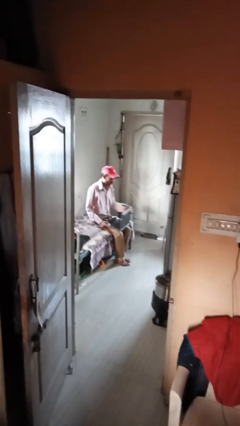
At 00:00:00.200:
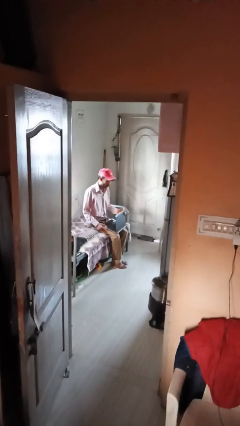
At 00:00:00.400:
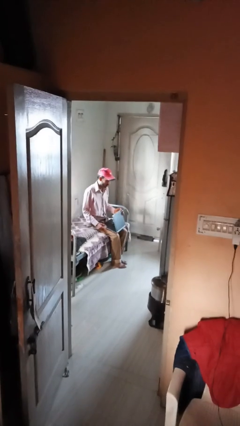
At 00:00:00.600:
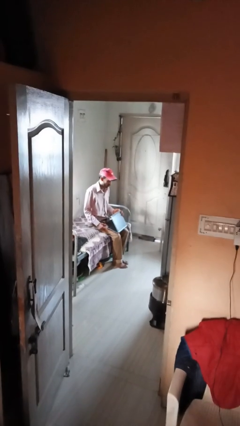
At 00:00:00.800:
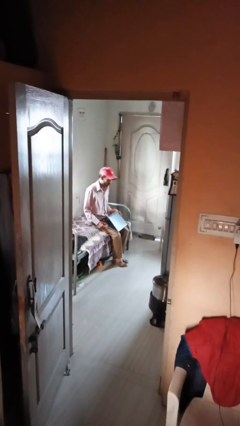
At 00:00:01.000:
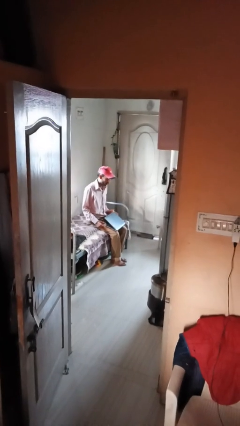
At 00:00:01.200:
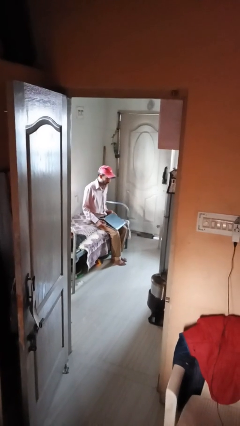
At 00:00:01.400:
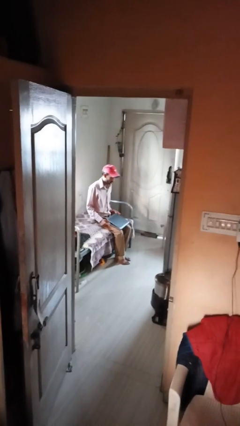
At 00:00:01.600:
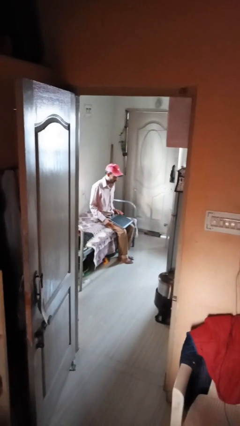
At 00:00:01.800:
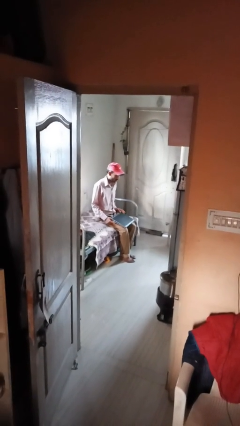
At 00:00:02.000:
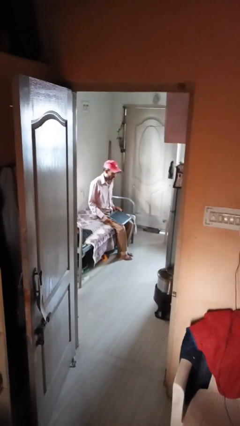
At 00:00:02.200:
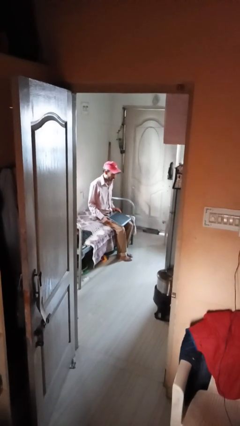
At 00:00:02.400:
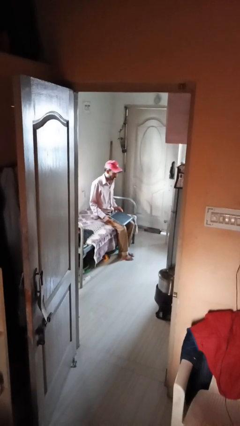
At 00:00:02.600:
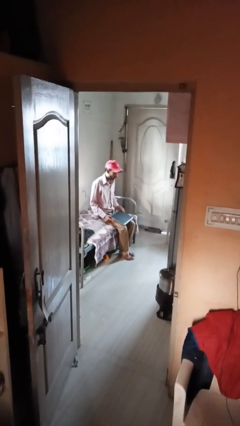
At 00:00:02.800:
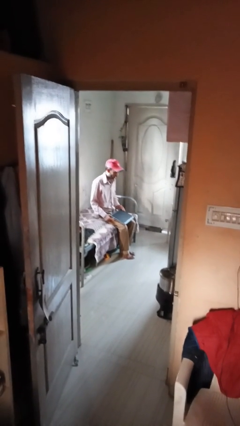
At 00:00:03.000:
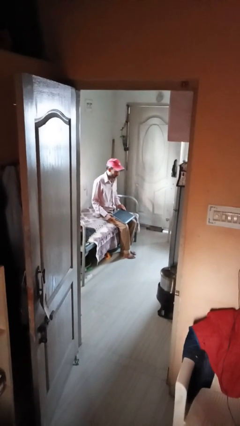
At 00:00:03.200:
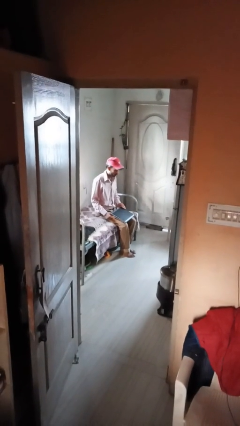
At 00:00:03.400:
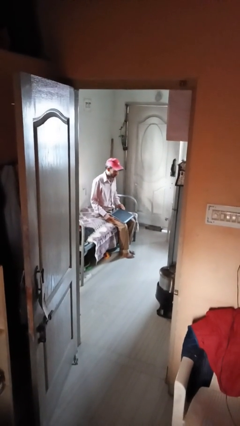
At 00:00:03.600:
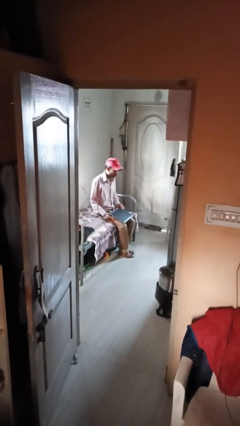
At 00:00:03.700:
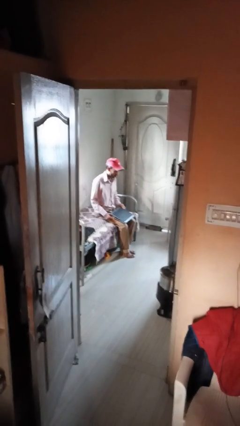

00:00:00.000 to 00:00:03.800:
person closes laptop

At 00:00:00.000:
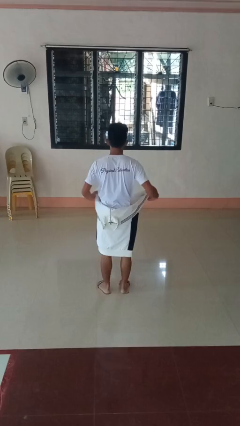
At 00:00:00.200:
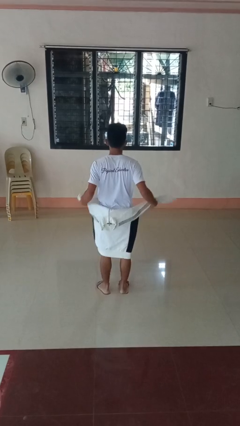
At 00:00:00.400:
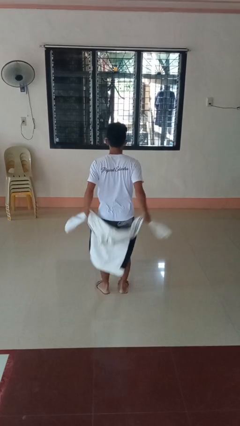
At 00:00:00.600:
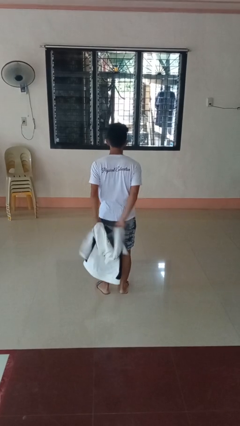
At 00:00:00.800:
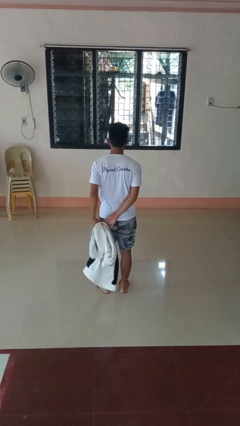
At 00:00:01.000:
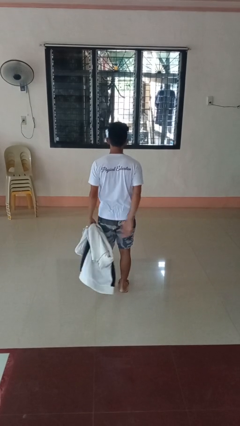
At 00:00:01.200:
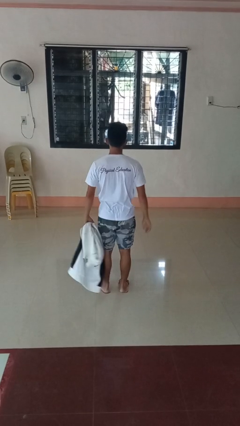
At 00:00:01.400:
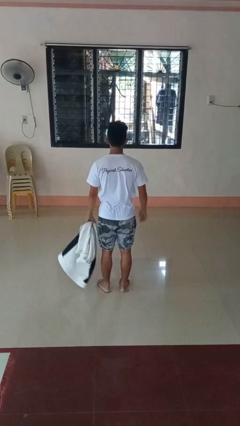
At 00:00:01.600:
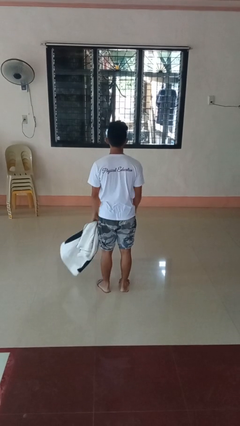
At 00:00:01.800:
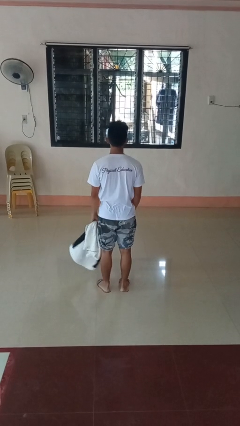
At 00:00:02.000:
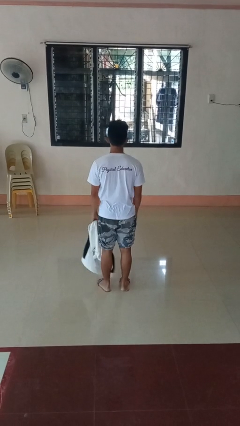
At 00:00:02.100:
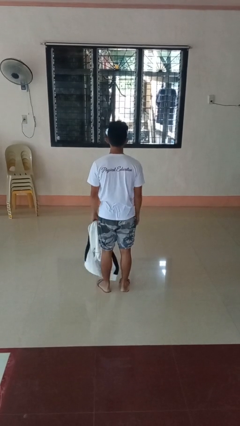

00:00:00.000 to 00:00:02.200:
person unties jacket around waist

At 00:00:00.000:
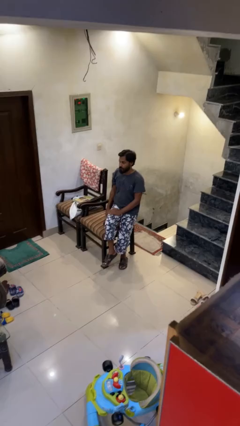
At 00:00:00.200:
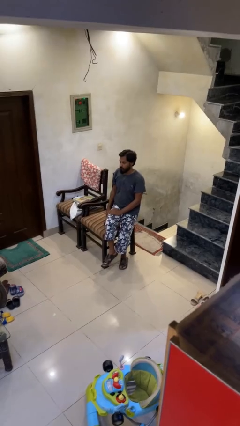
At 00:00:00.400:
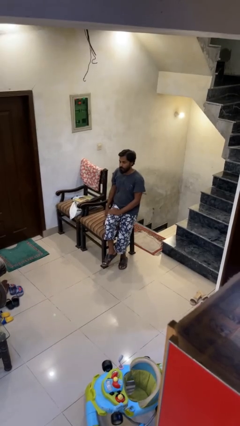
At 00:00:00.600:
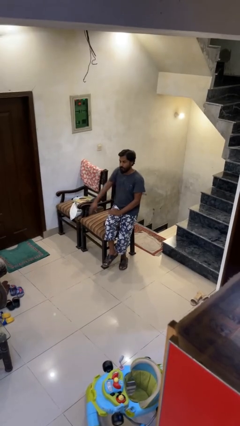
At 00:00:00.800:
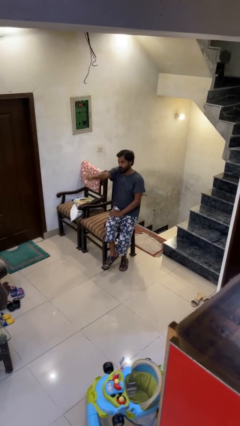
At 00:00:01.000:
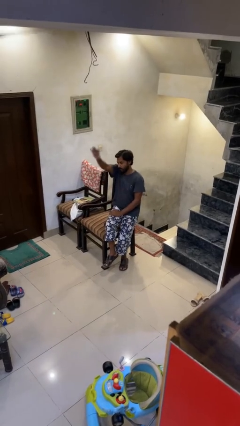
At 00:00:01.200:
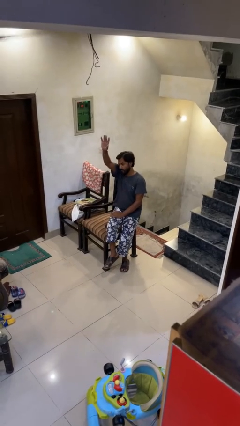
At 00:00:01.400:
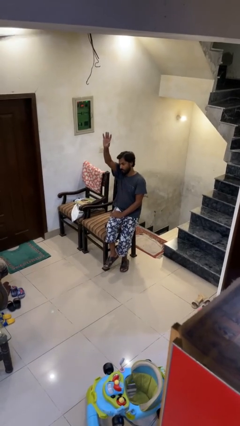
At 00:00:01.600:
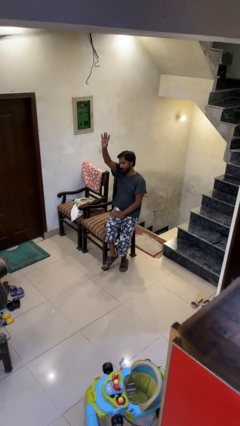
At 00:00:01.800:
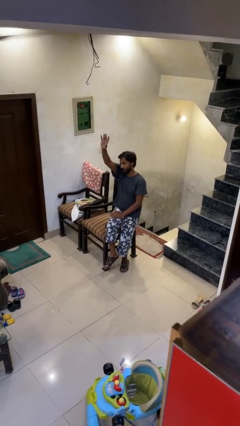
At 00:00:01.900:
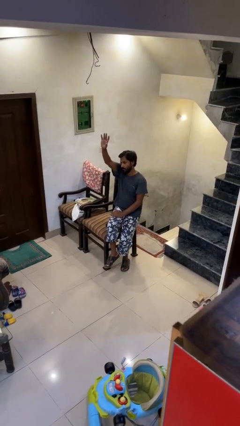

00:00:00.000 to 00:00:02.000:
person gestures raise hand

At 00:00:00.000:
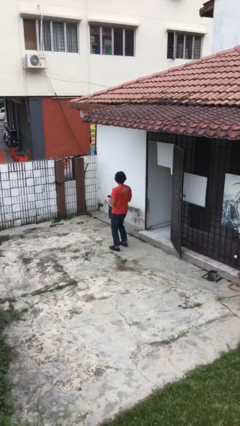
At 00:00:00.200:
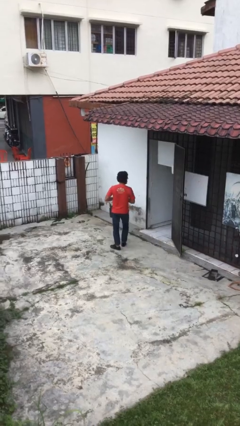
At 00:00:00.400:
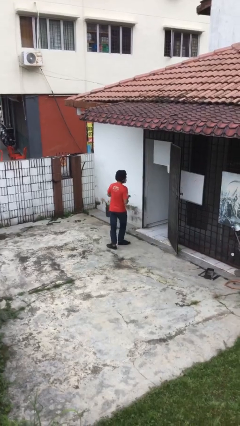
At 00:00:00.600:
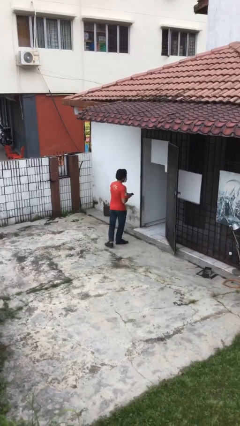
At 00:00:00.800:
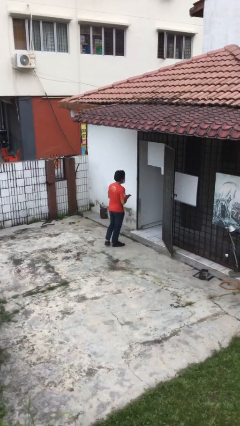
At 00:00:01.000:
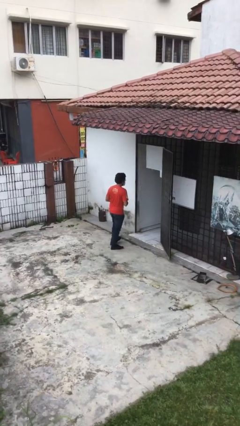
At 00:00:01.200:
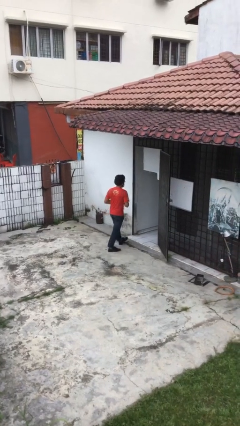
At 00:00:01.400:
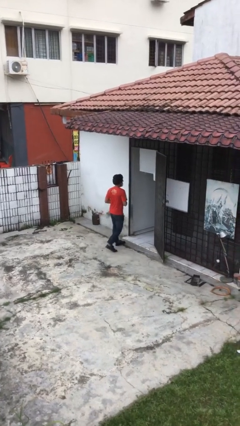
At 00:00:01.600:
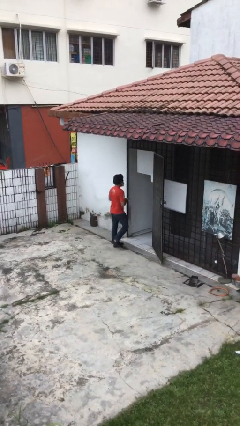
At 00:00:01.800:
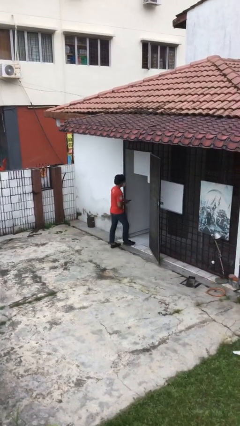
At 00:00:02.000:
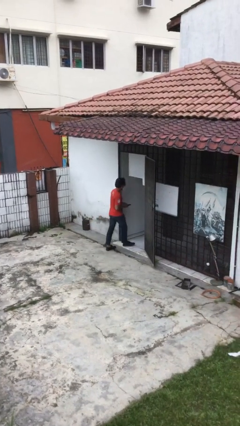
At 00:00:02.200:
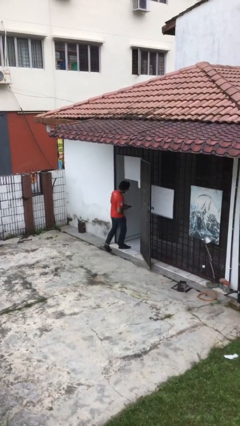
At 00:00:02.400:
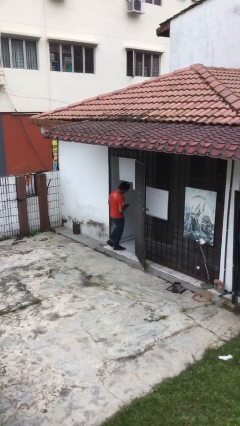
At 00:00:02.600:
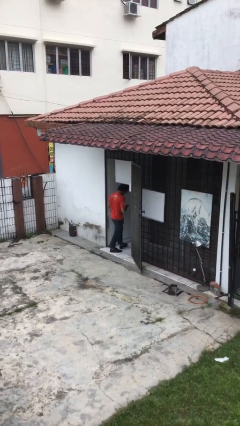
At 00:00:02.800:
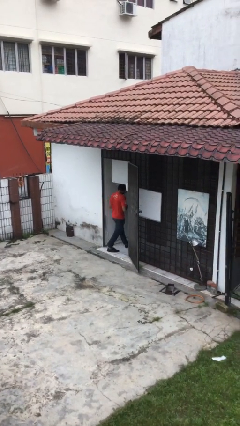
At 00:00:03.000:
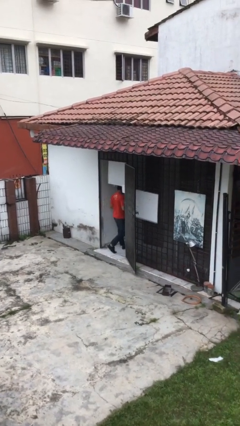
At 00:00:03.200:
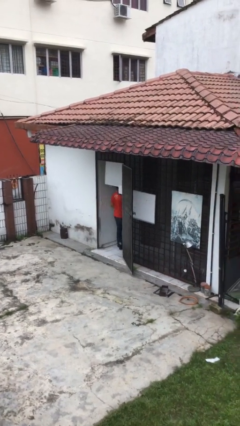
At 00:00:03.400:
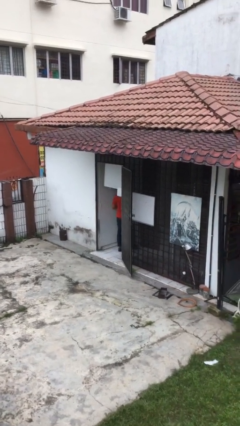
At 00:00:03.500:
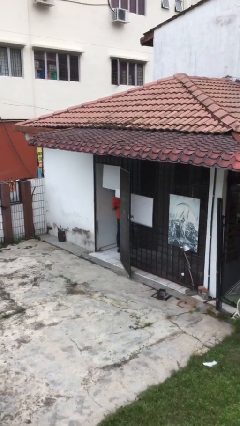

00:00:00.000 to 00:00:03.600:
person exits scene through structure

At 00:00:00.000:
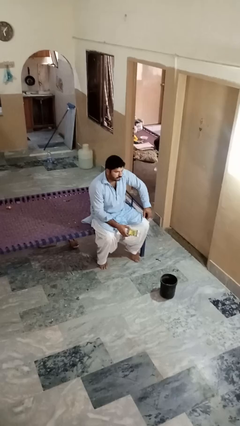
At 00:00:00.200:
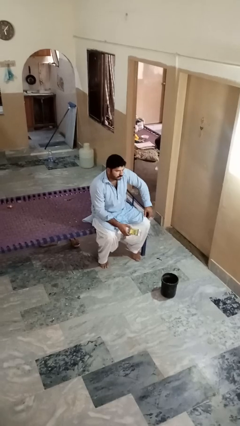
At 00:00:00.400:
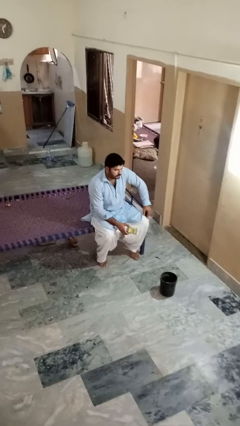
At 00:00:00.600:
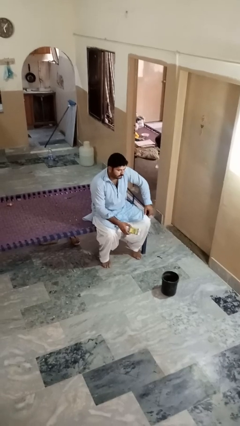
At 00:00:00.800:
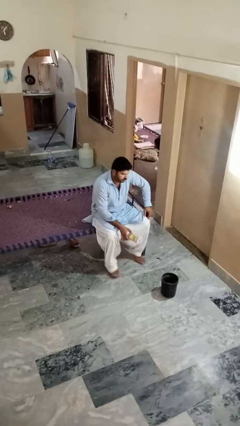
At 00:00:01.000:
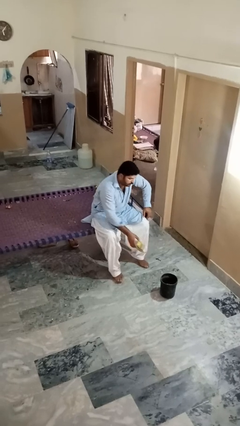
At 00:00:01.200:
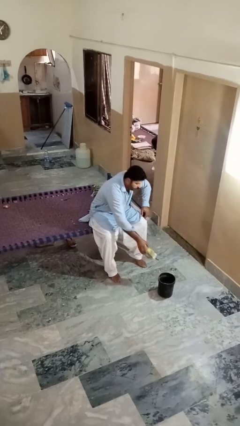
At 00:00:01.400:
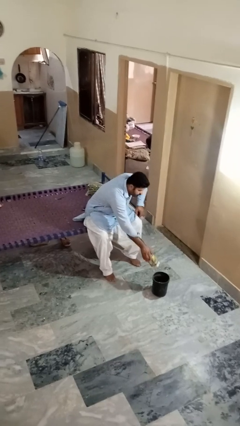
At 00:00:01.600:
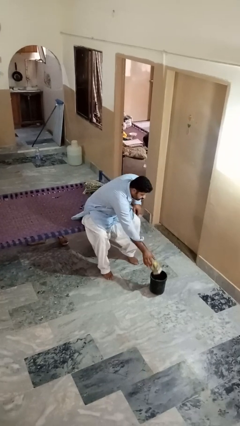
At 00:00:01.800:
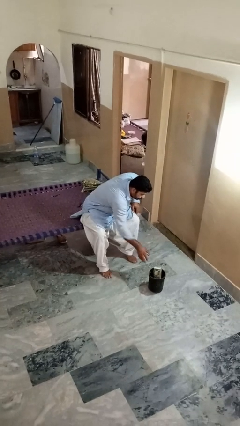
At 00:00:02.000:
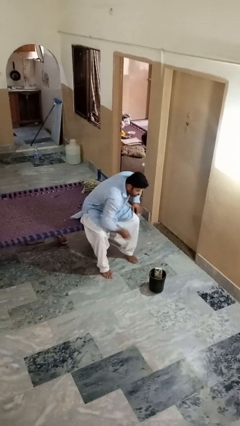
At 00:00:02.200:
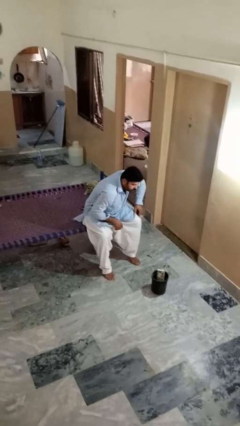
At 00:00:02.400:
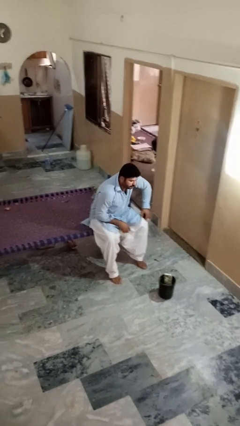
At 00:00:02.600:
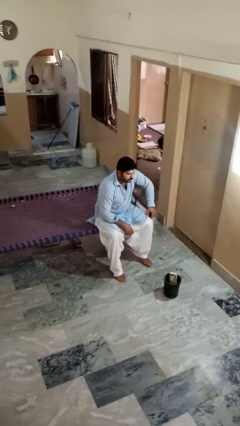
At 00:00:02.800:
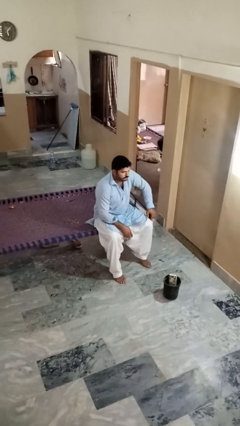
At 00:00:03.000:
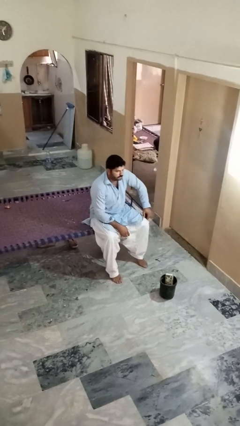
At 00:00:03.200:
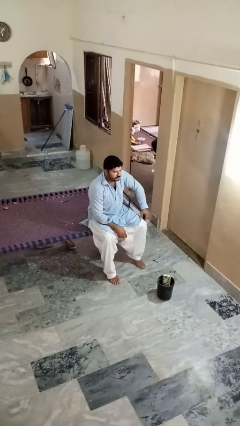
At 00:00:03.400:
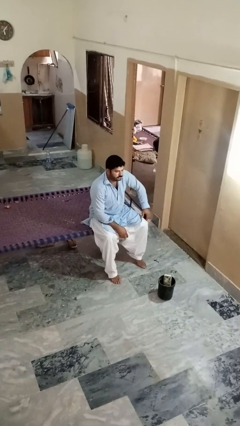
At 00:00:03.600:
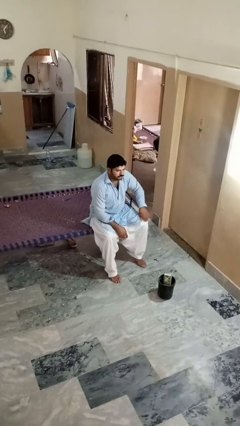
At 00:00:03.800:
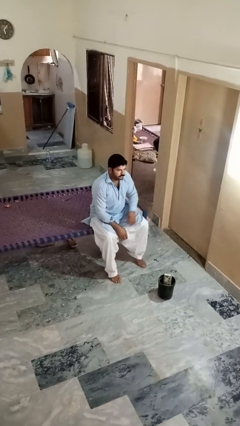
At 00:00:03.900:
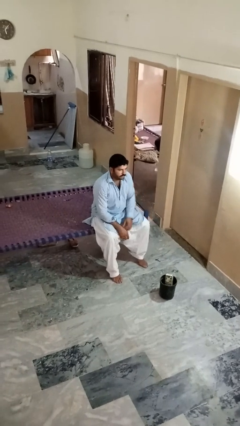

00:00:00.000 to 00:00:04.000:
person puts object into basket

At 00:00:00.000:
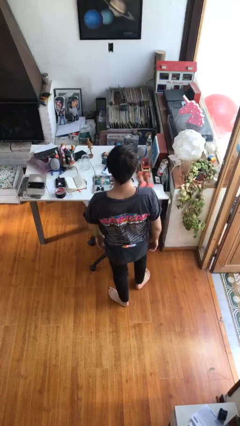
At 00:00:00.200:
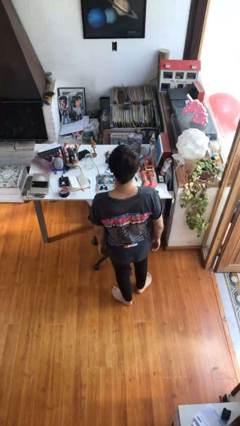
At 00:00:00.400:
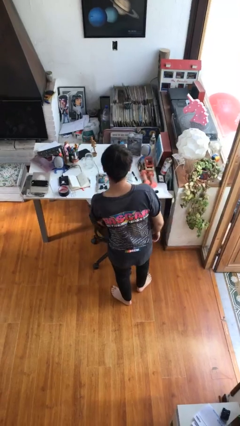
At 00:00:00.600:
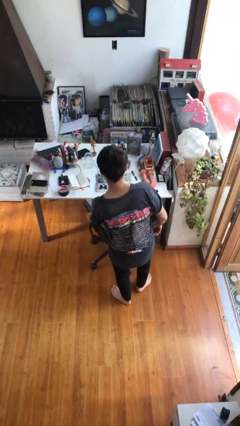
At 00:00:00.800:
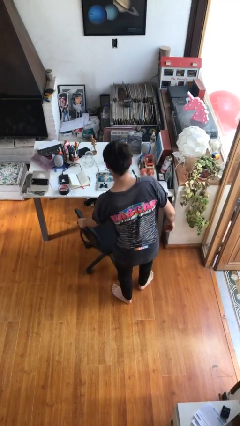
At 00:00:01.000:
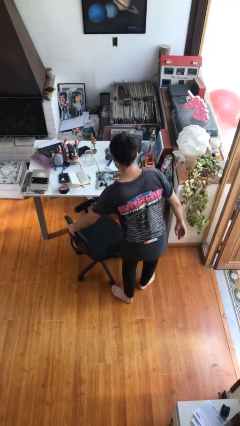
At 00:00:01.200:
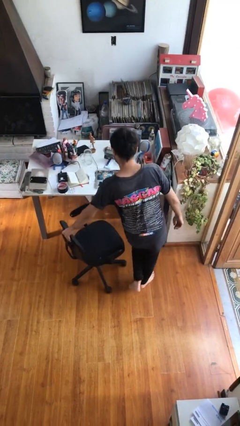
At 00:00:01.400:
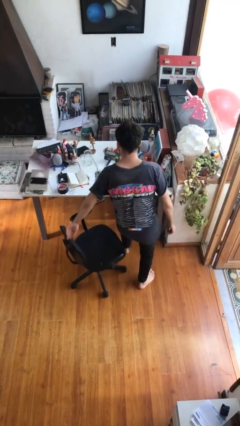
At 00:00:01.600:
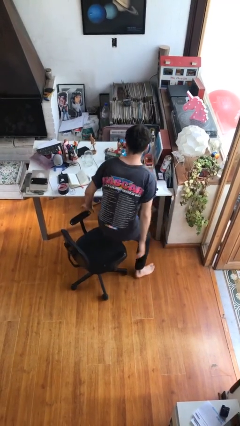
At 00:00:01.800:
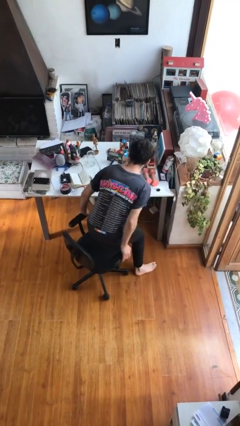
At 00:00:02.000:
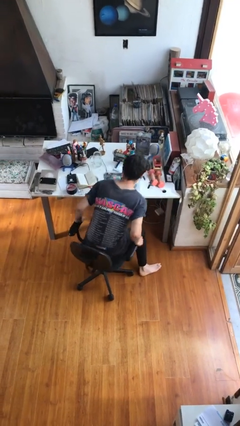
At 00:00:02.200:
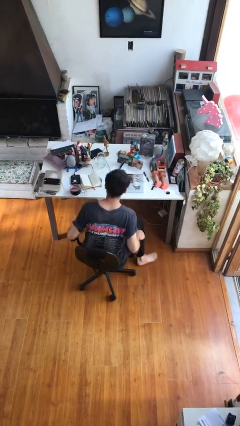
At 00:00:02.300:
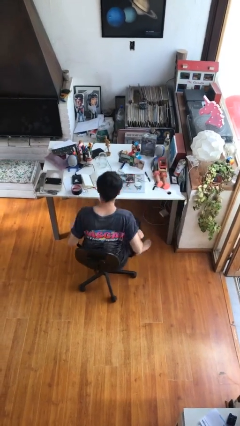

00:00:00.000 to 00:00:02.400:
person sits down
